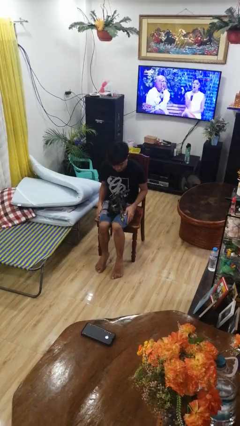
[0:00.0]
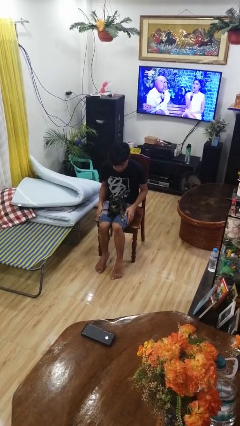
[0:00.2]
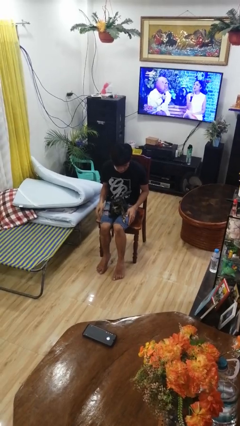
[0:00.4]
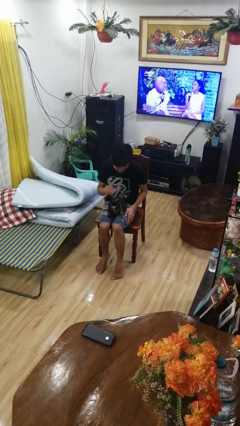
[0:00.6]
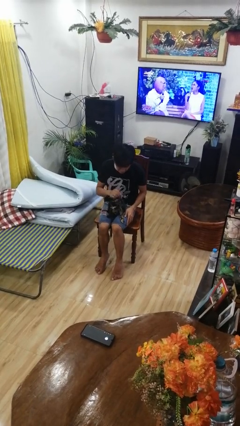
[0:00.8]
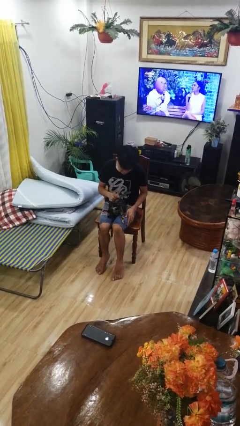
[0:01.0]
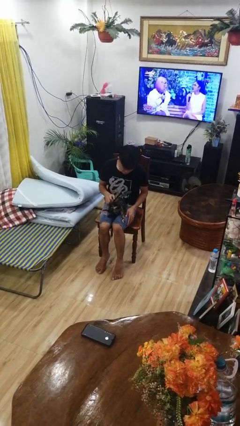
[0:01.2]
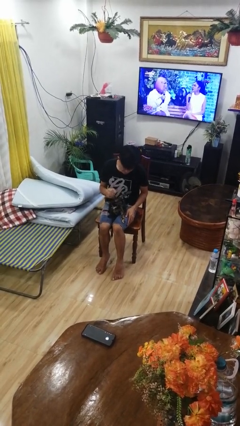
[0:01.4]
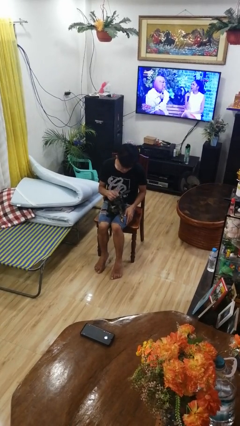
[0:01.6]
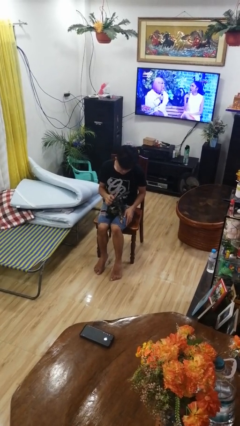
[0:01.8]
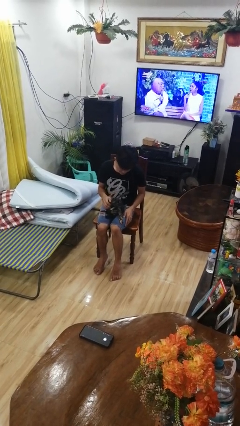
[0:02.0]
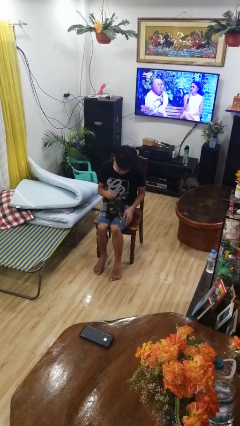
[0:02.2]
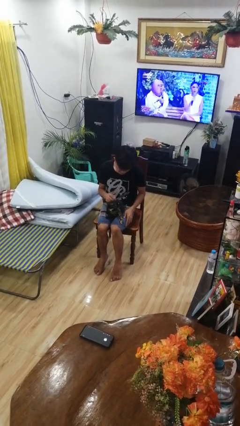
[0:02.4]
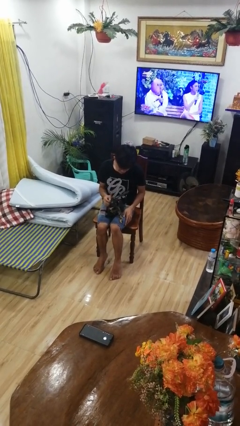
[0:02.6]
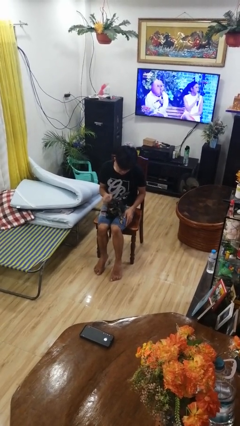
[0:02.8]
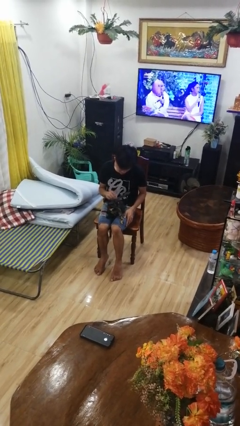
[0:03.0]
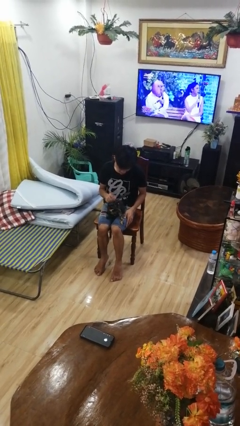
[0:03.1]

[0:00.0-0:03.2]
person pets cat

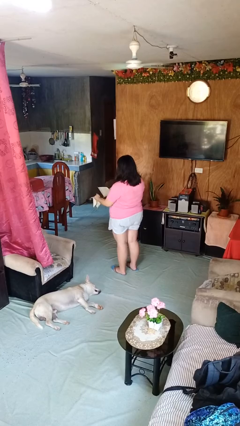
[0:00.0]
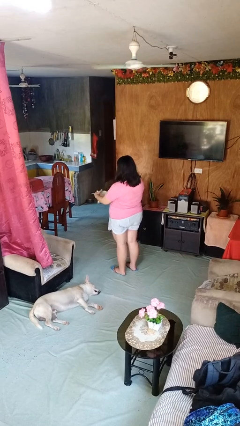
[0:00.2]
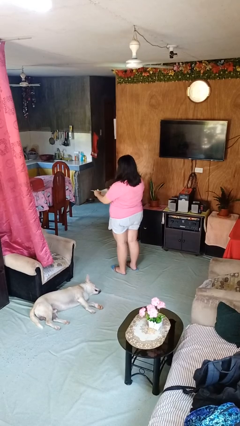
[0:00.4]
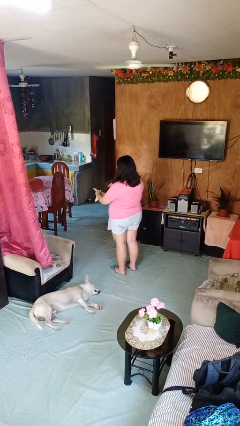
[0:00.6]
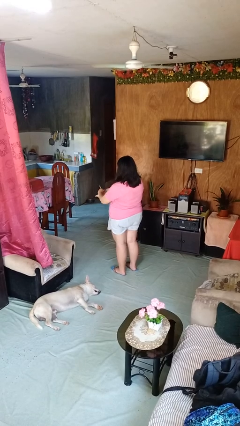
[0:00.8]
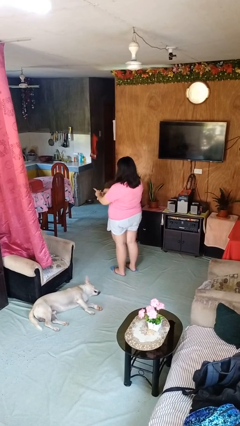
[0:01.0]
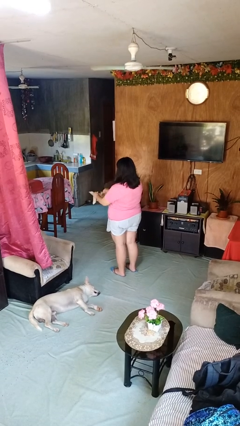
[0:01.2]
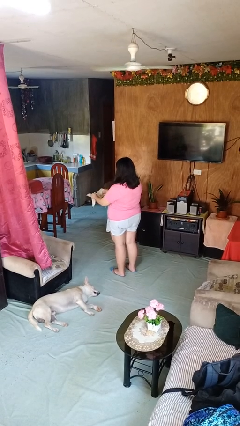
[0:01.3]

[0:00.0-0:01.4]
person tears paper

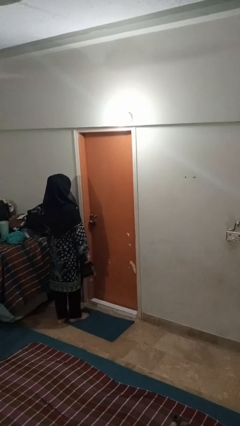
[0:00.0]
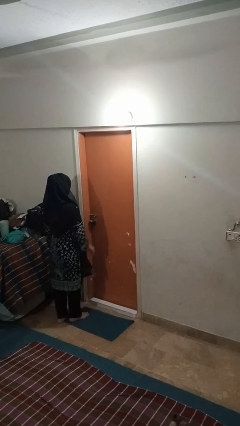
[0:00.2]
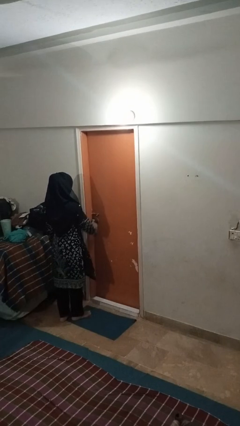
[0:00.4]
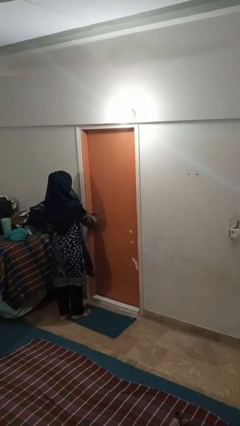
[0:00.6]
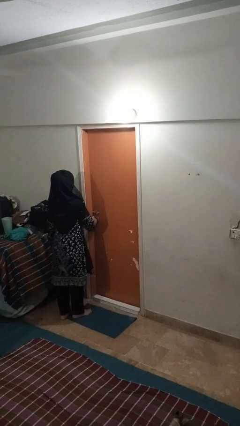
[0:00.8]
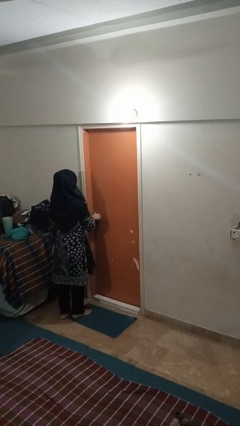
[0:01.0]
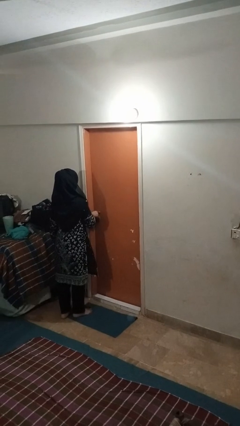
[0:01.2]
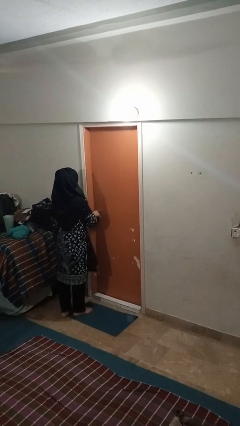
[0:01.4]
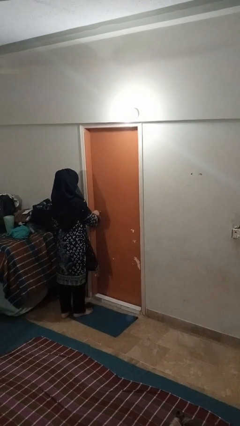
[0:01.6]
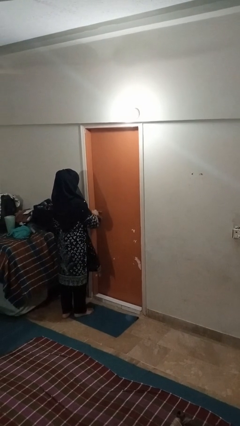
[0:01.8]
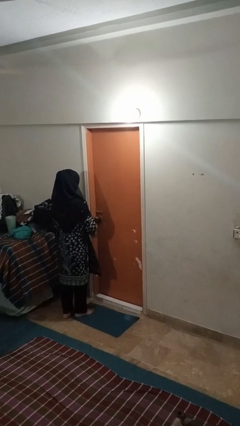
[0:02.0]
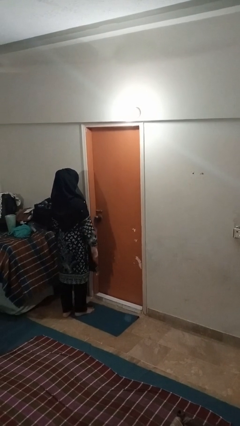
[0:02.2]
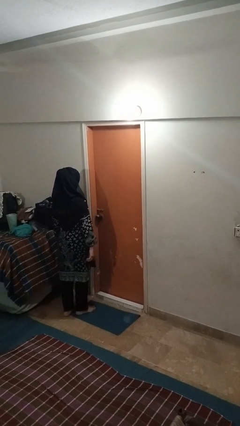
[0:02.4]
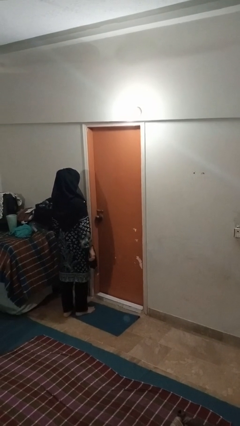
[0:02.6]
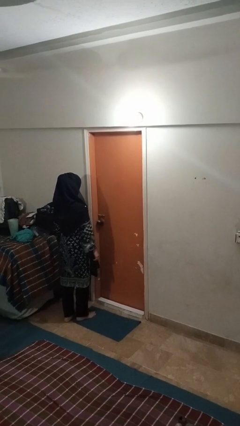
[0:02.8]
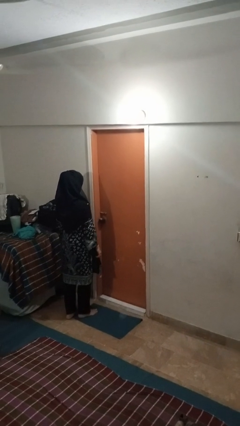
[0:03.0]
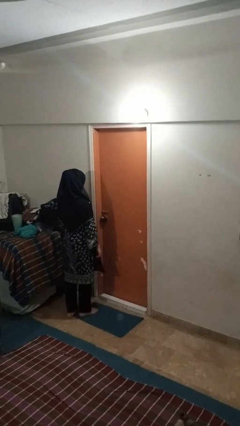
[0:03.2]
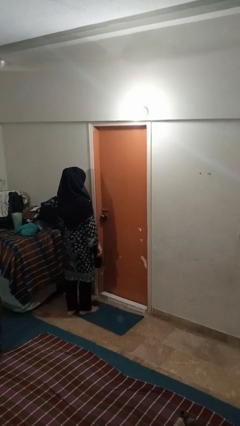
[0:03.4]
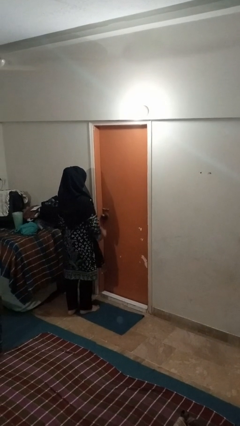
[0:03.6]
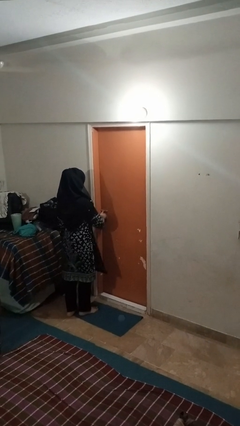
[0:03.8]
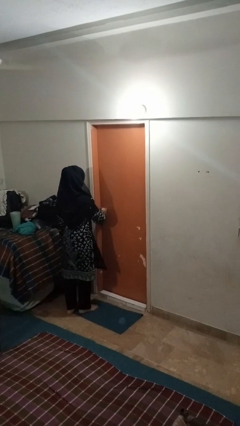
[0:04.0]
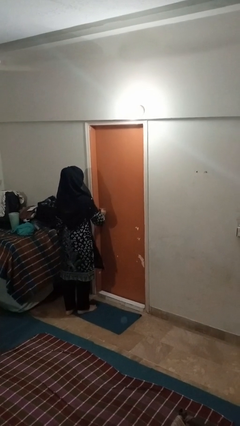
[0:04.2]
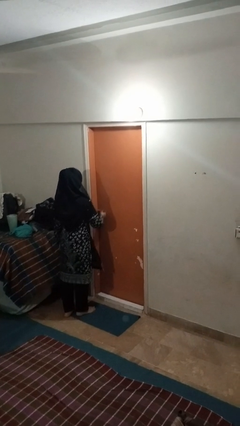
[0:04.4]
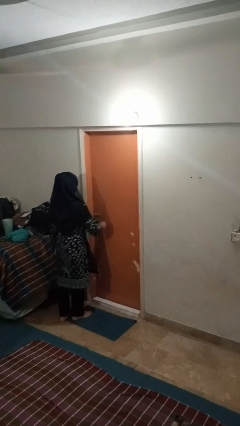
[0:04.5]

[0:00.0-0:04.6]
person locks door with keys

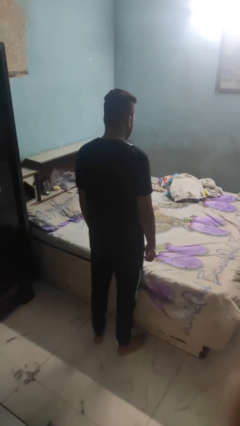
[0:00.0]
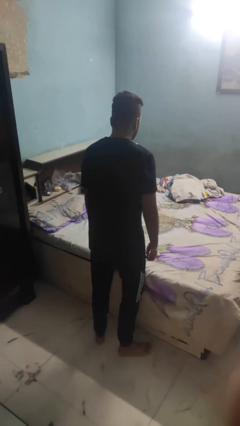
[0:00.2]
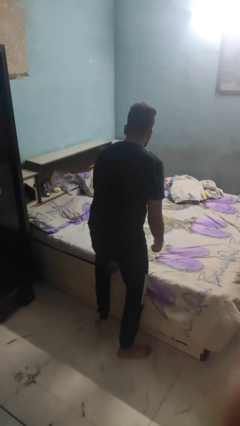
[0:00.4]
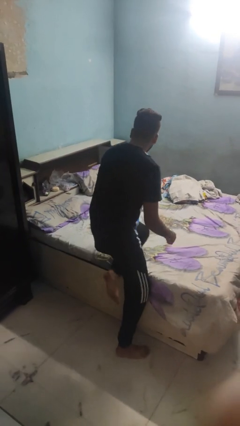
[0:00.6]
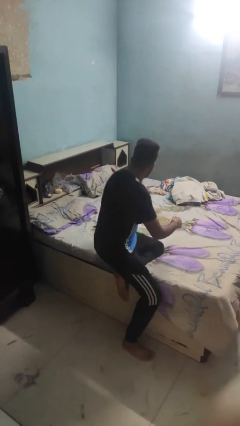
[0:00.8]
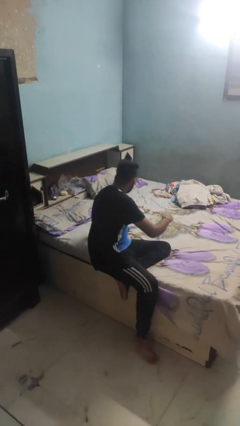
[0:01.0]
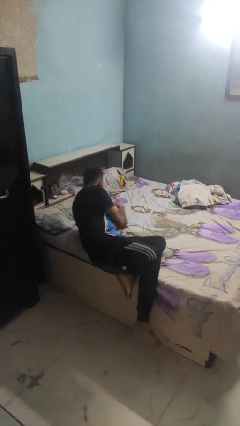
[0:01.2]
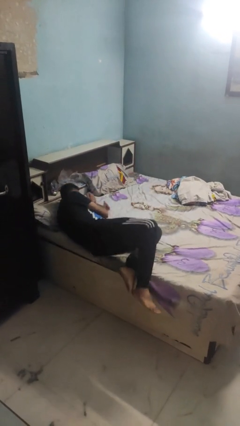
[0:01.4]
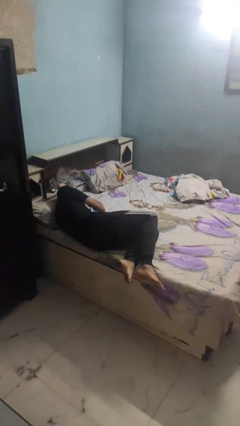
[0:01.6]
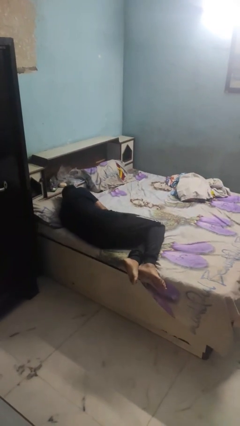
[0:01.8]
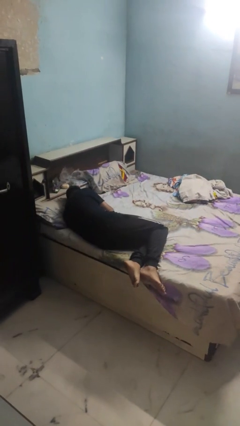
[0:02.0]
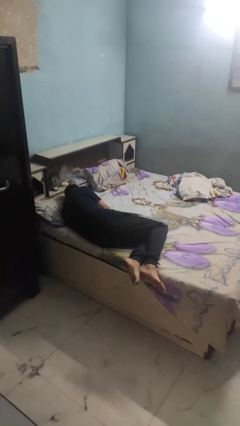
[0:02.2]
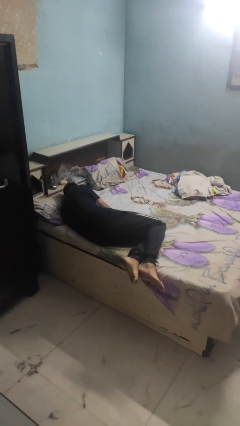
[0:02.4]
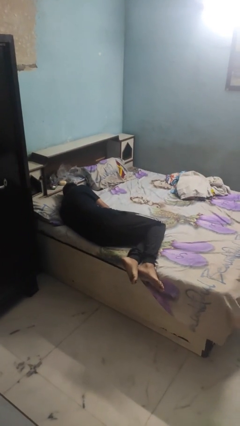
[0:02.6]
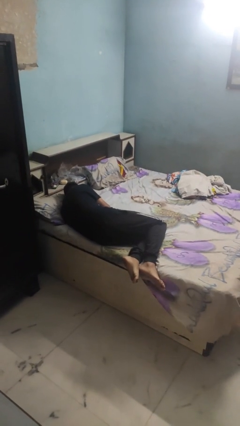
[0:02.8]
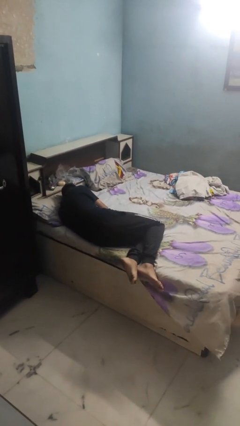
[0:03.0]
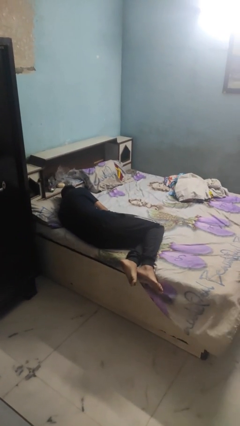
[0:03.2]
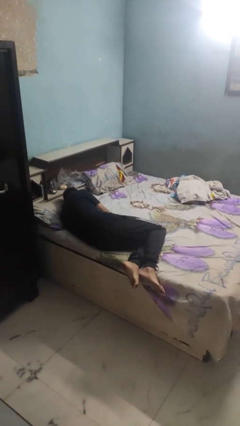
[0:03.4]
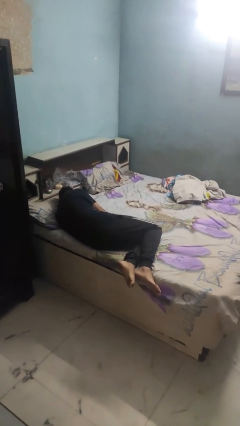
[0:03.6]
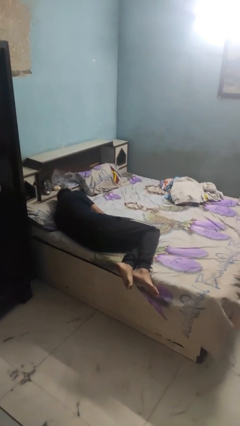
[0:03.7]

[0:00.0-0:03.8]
person lies down on bed

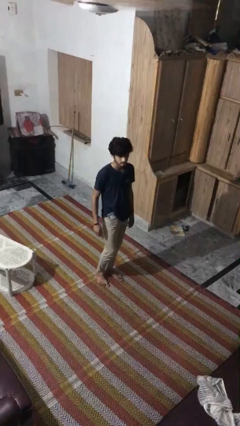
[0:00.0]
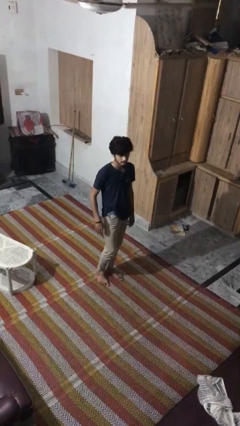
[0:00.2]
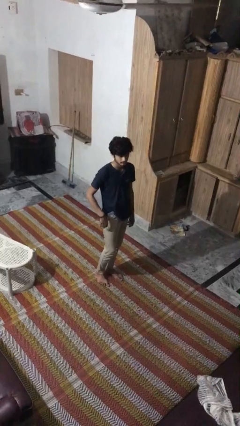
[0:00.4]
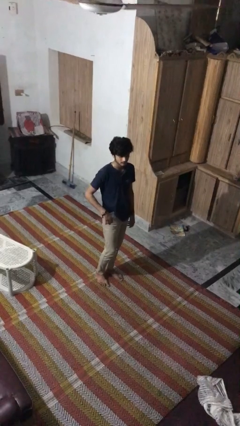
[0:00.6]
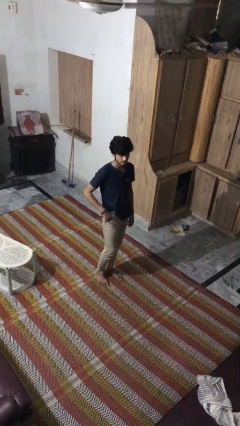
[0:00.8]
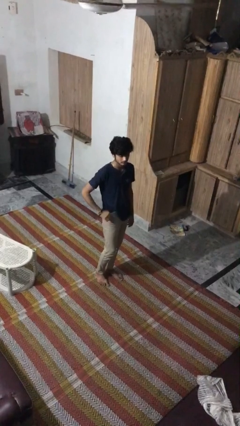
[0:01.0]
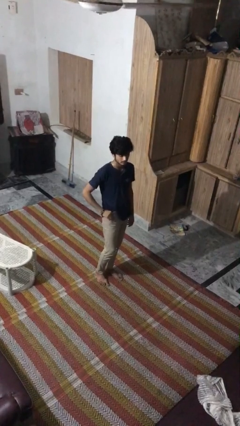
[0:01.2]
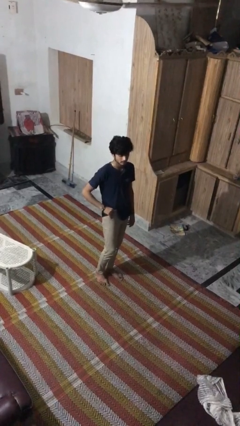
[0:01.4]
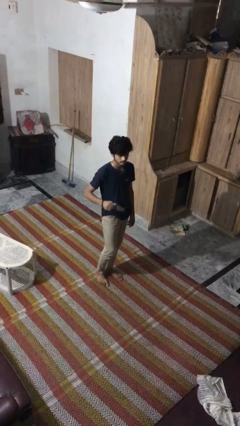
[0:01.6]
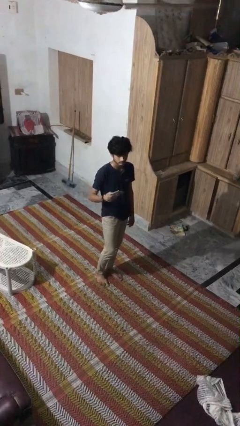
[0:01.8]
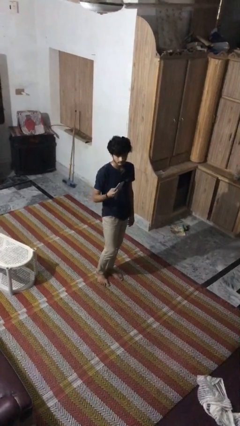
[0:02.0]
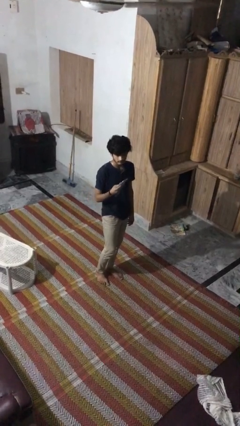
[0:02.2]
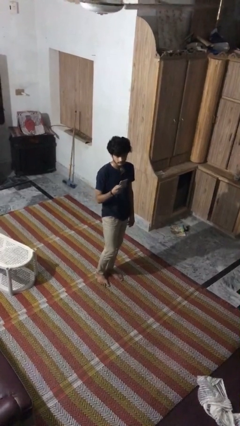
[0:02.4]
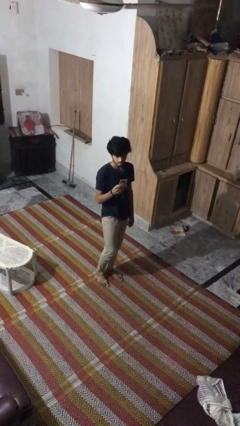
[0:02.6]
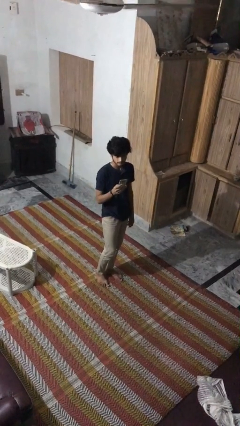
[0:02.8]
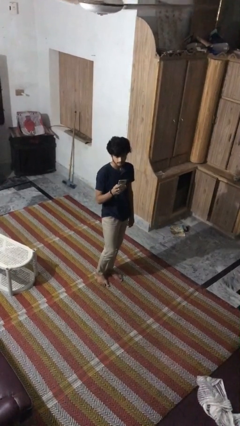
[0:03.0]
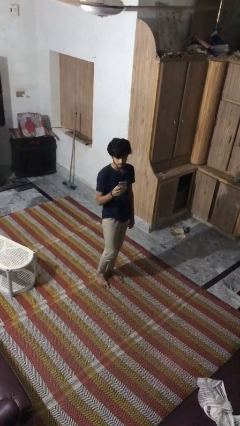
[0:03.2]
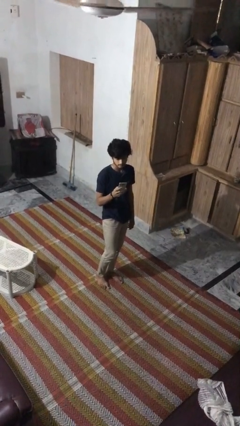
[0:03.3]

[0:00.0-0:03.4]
person takes phone from pocket

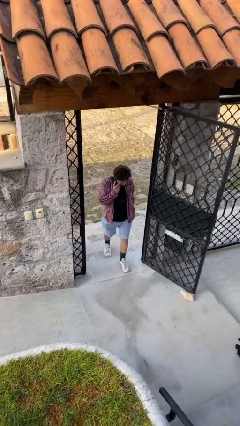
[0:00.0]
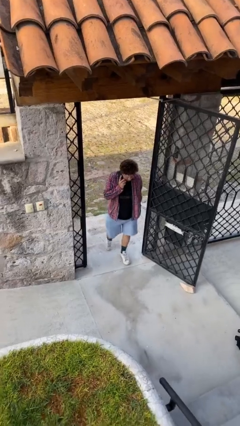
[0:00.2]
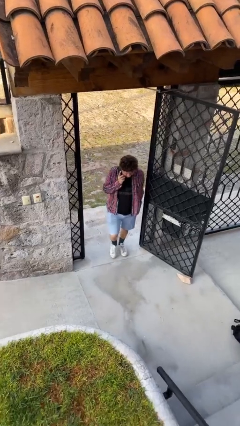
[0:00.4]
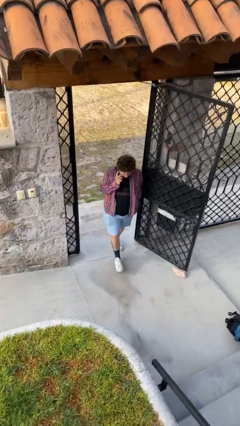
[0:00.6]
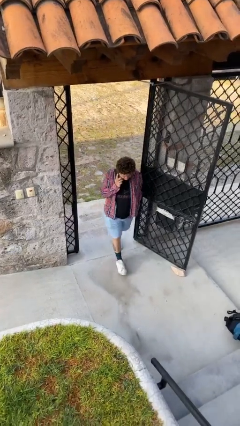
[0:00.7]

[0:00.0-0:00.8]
person enters scene through structure
